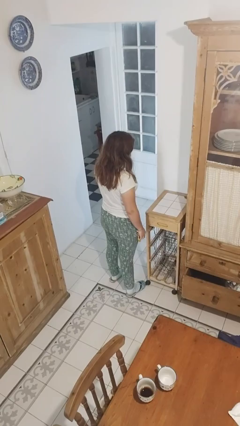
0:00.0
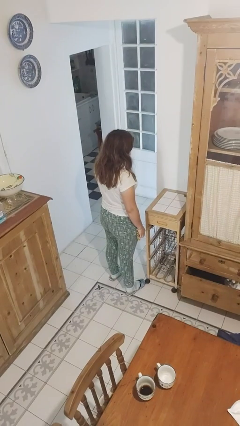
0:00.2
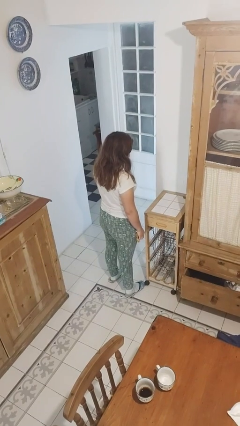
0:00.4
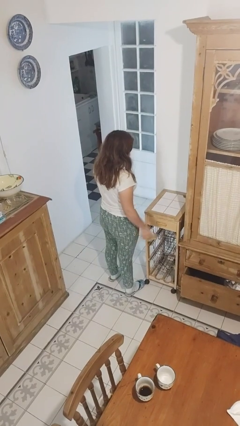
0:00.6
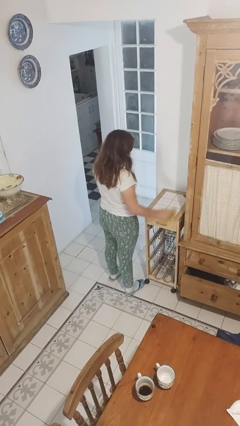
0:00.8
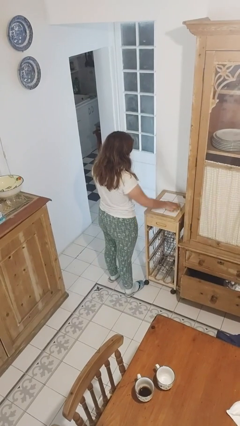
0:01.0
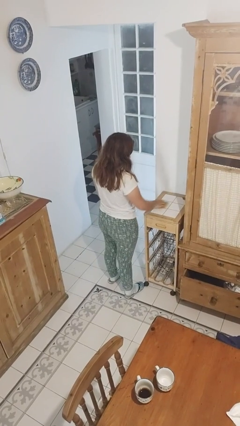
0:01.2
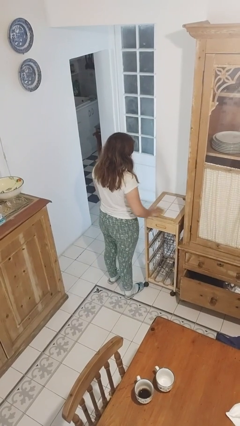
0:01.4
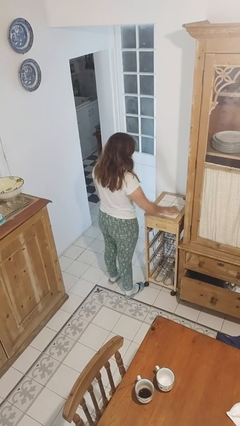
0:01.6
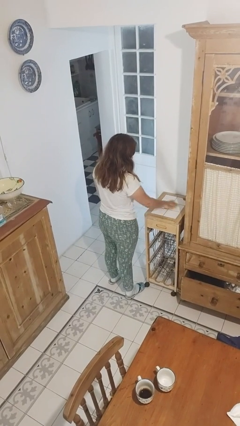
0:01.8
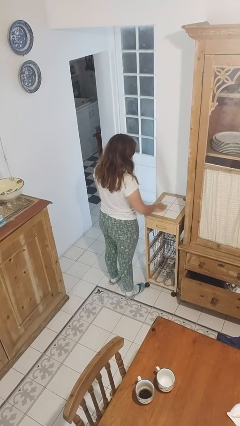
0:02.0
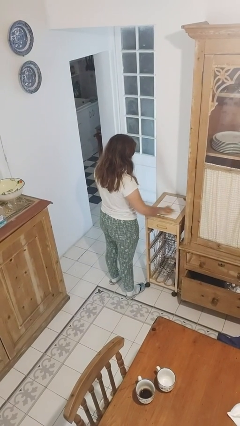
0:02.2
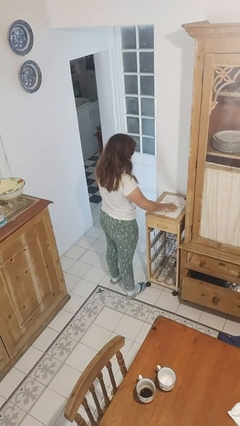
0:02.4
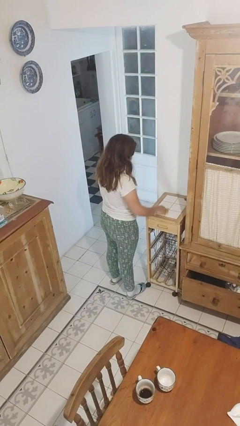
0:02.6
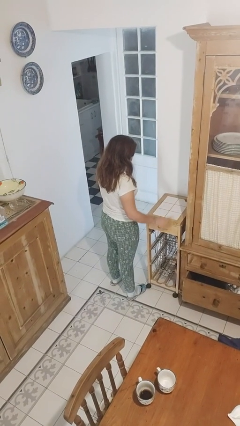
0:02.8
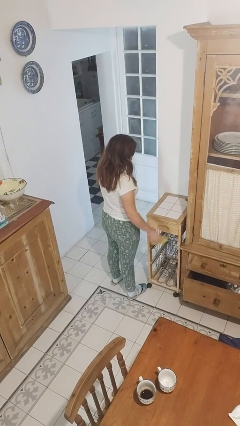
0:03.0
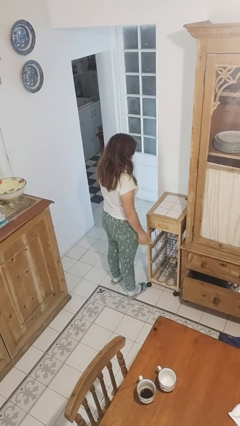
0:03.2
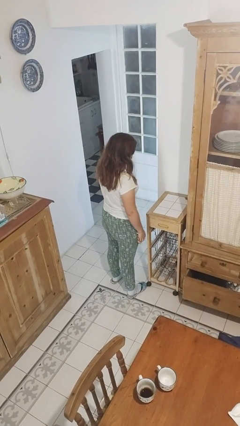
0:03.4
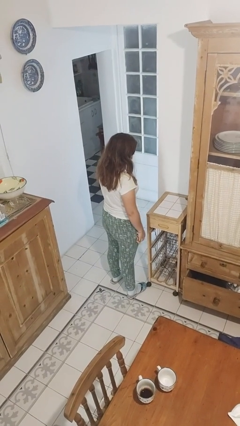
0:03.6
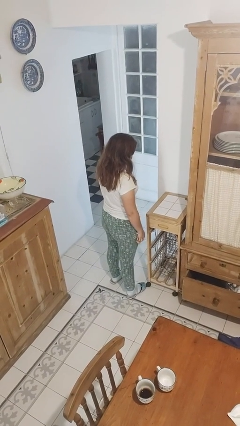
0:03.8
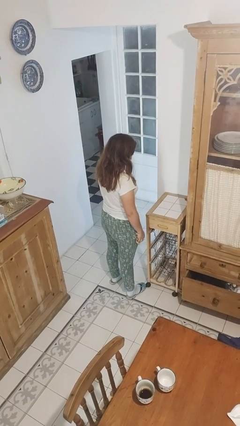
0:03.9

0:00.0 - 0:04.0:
person cleans table with rag

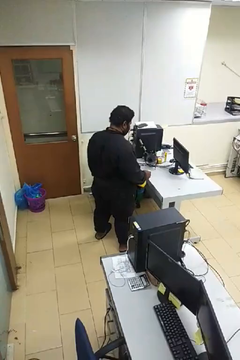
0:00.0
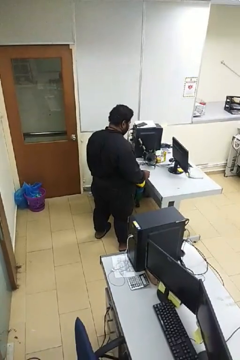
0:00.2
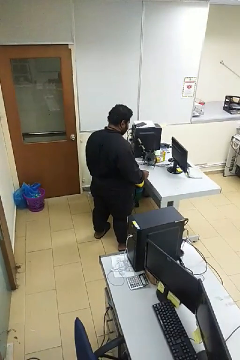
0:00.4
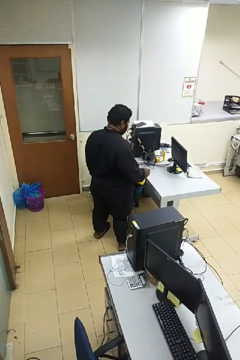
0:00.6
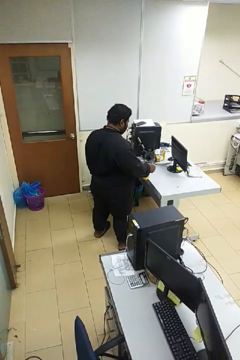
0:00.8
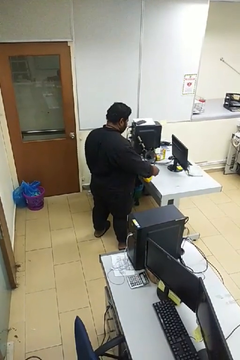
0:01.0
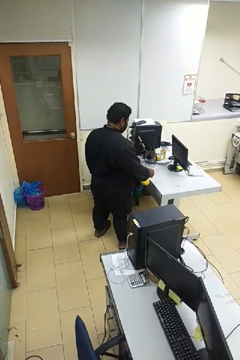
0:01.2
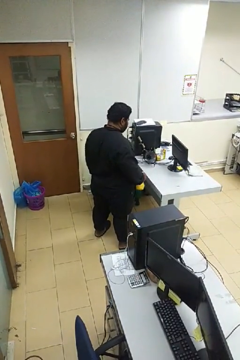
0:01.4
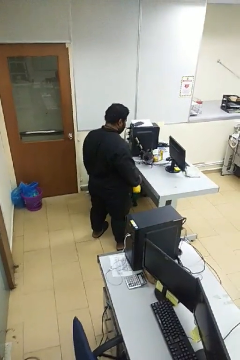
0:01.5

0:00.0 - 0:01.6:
person sprays from bottle

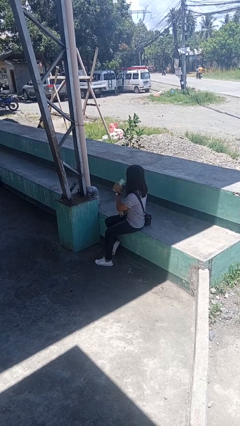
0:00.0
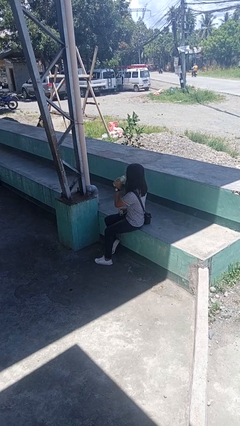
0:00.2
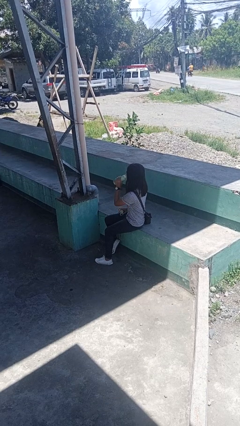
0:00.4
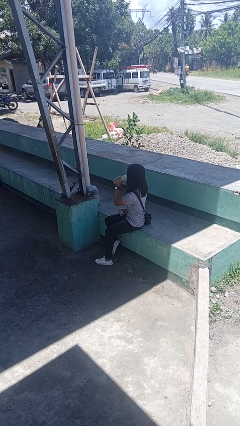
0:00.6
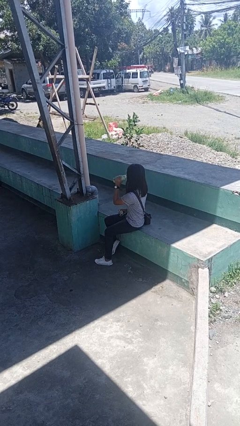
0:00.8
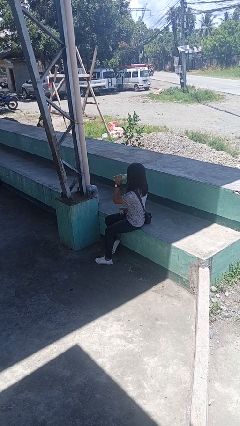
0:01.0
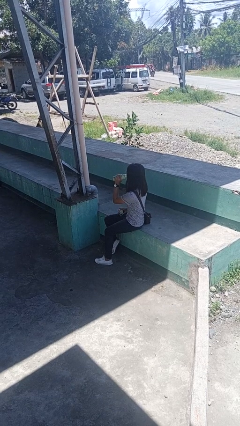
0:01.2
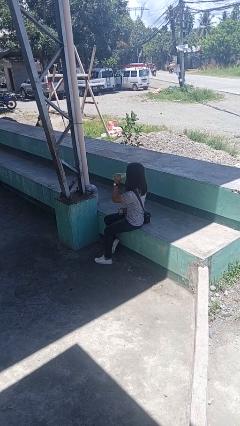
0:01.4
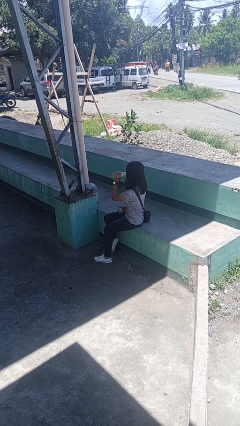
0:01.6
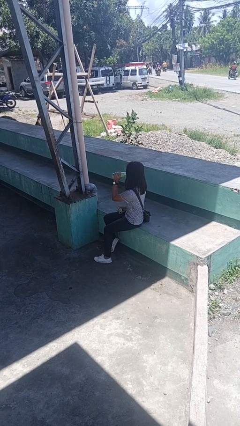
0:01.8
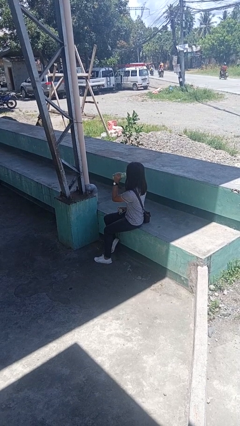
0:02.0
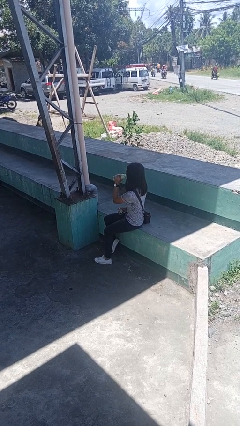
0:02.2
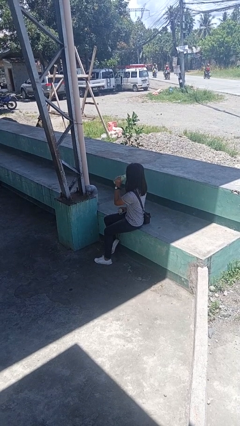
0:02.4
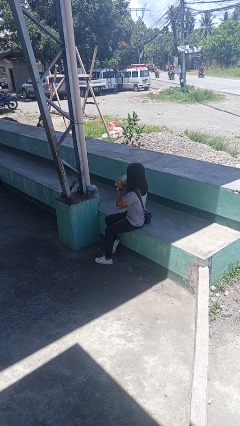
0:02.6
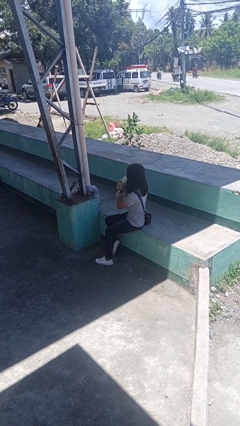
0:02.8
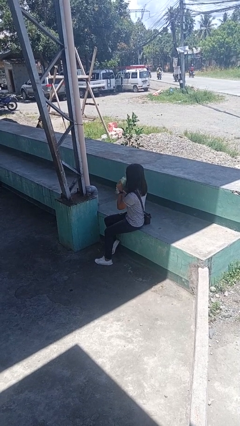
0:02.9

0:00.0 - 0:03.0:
person drinks from bottle

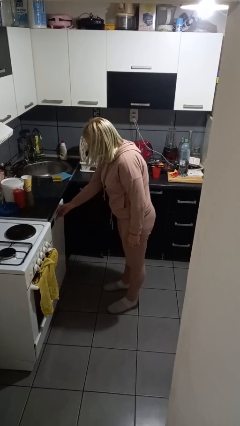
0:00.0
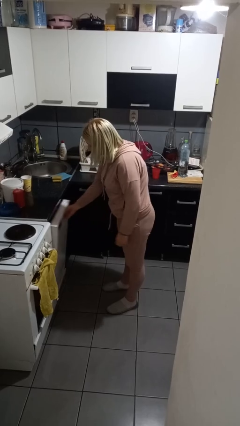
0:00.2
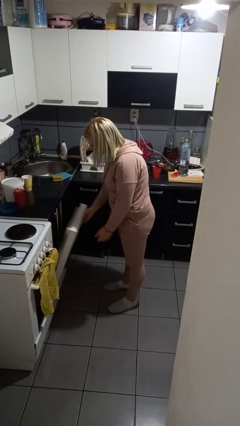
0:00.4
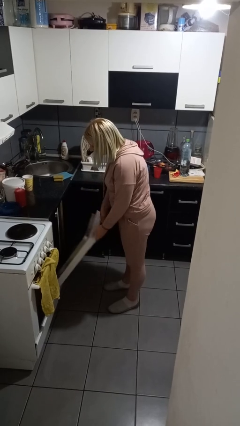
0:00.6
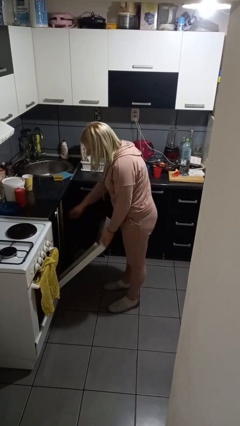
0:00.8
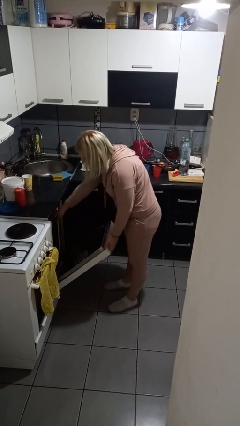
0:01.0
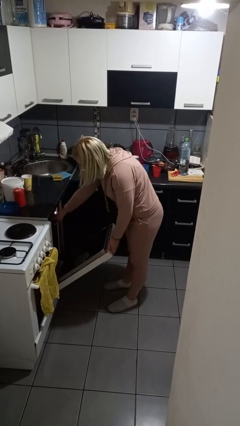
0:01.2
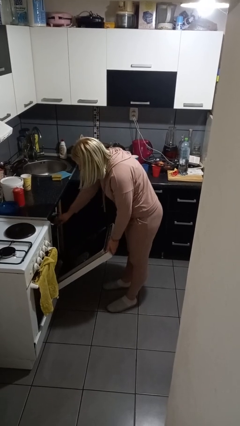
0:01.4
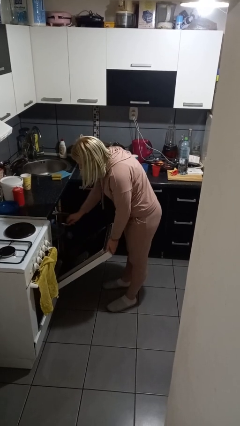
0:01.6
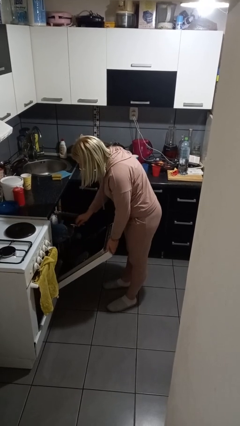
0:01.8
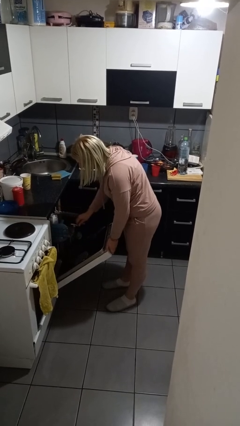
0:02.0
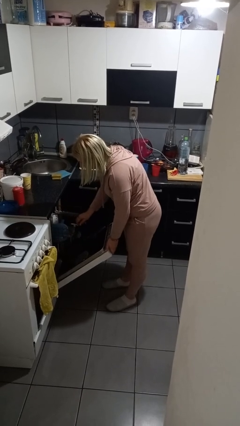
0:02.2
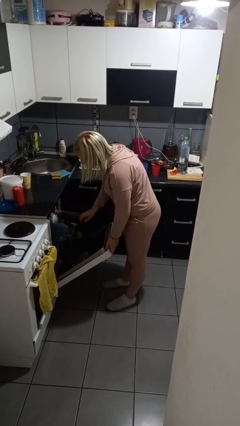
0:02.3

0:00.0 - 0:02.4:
person opens dishwasher

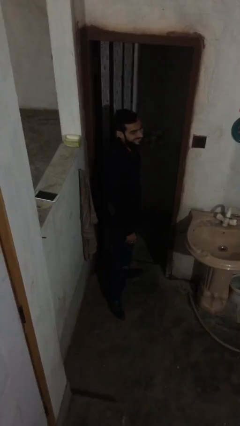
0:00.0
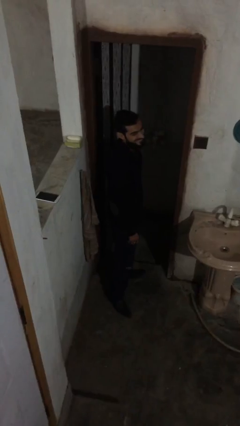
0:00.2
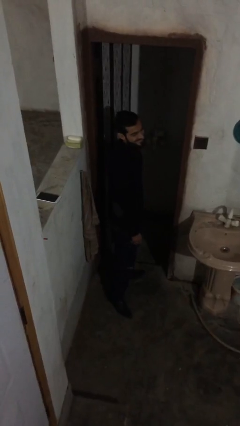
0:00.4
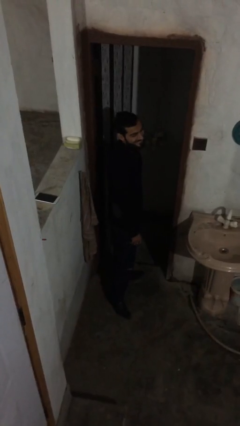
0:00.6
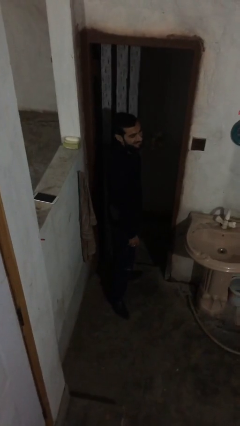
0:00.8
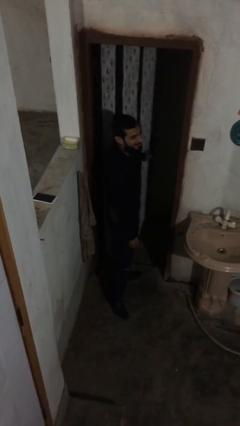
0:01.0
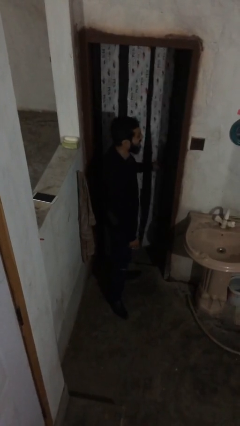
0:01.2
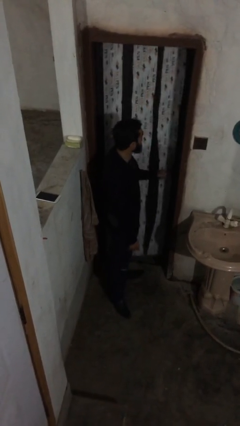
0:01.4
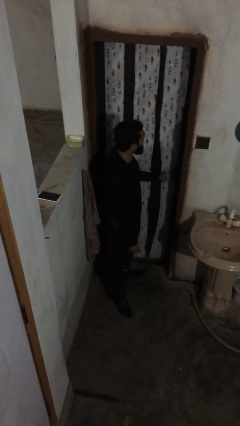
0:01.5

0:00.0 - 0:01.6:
person closes facility door

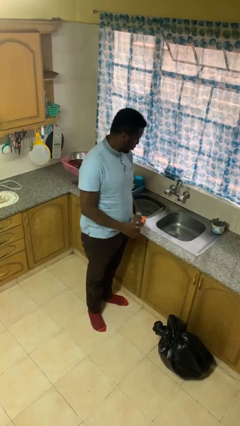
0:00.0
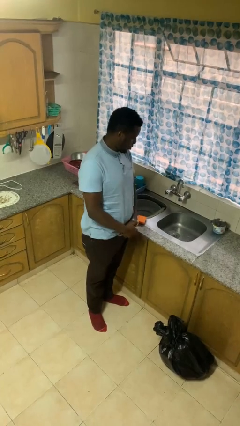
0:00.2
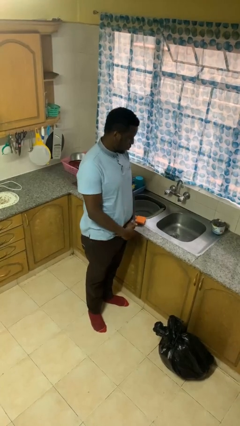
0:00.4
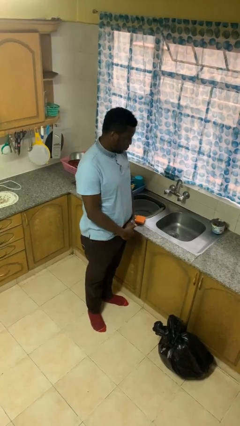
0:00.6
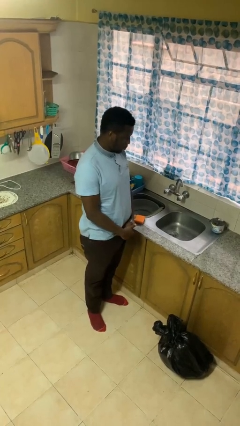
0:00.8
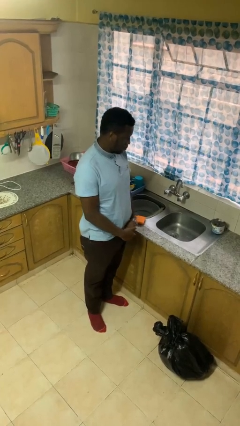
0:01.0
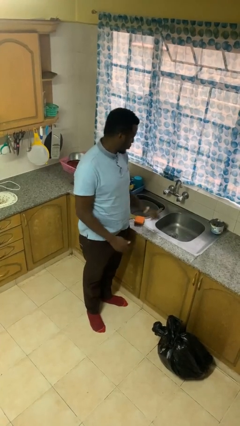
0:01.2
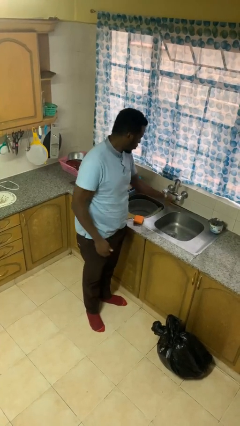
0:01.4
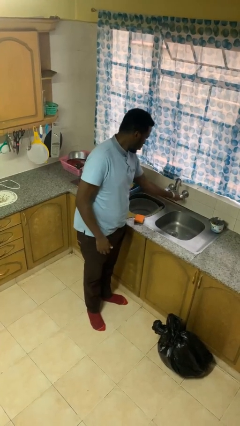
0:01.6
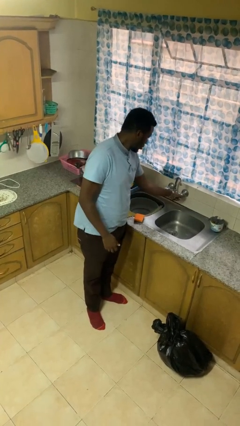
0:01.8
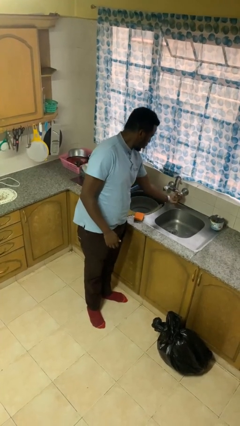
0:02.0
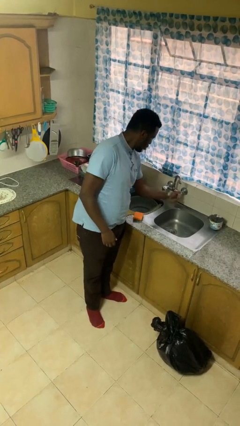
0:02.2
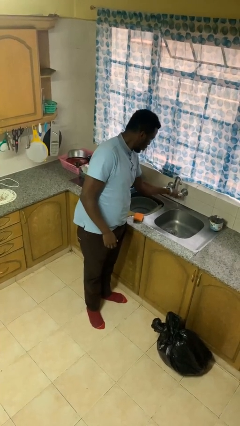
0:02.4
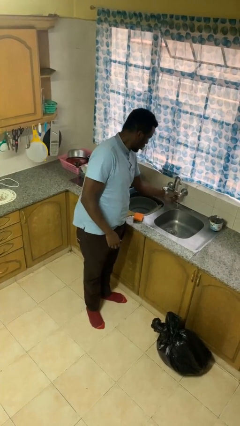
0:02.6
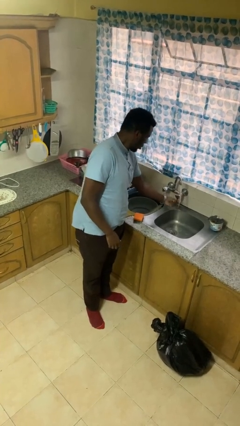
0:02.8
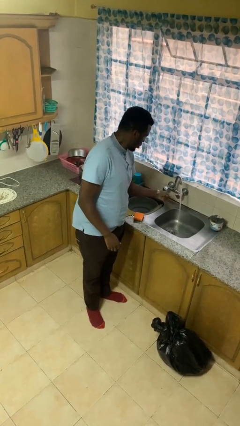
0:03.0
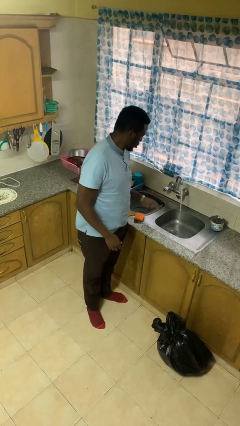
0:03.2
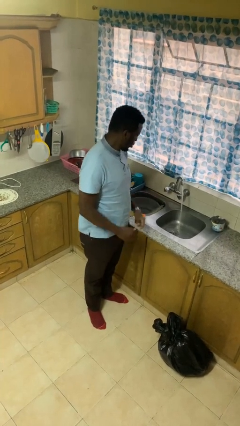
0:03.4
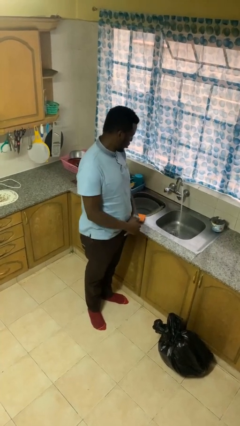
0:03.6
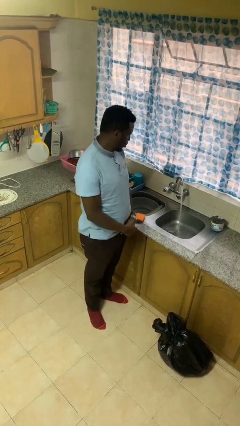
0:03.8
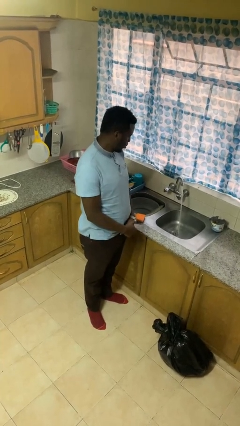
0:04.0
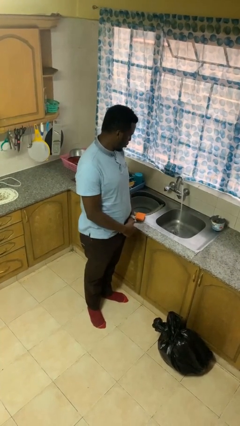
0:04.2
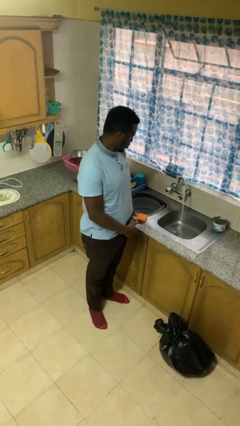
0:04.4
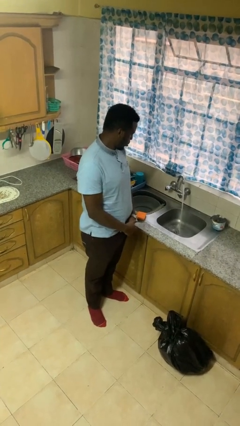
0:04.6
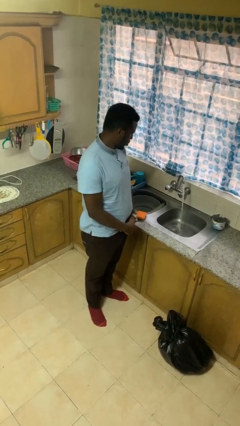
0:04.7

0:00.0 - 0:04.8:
person turns on faucet
